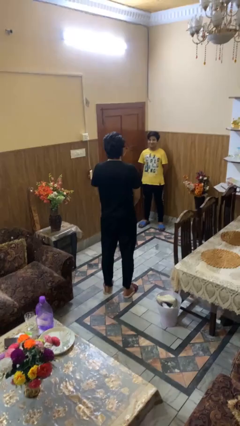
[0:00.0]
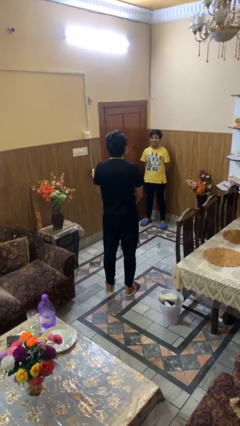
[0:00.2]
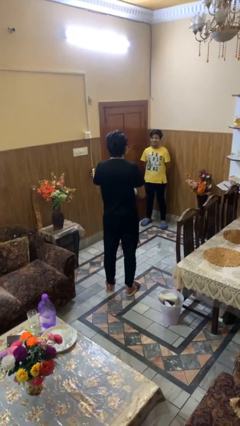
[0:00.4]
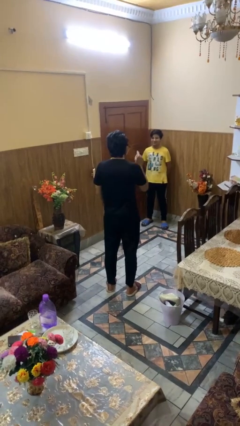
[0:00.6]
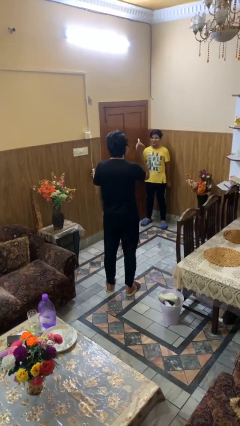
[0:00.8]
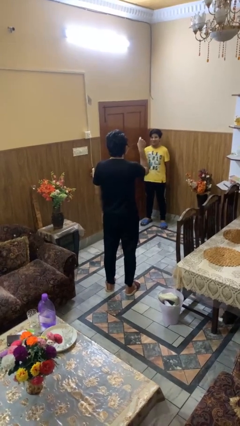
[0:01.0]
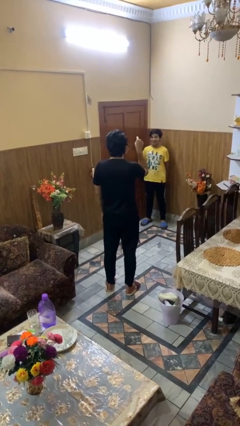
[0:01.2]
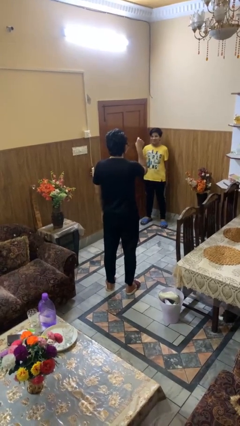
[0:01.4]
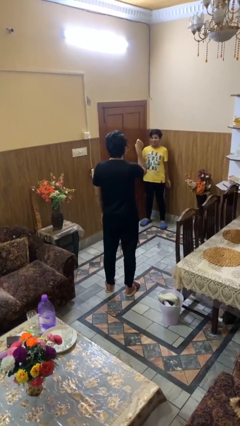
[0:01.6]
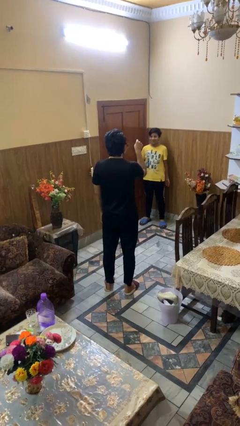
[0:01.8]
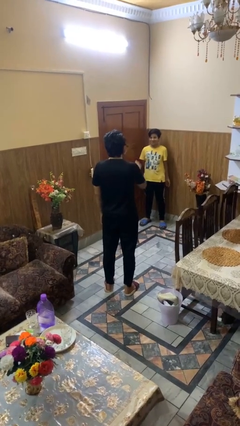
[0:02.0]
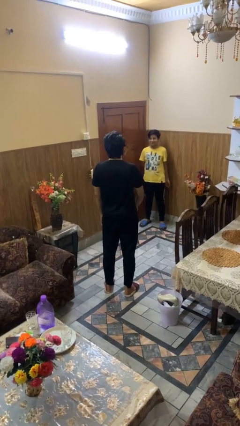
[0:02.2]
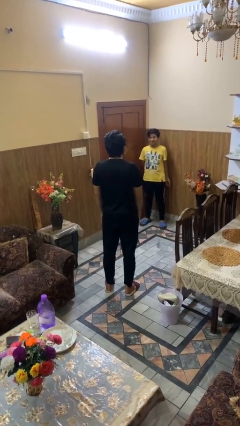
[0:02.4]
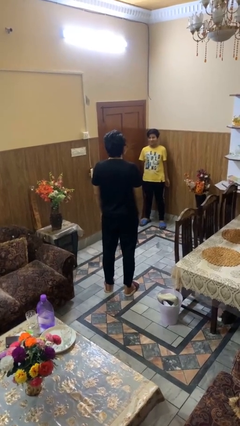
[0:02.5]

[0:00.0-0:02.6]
person points at person

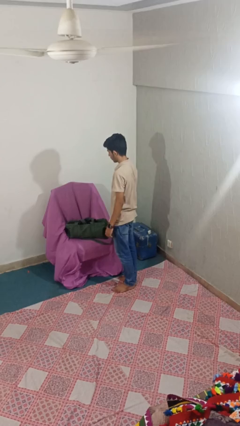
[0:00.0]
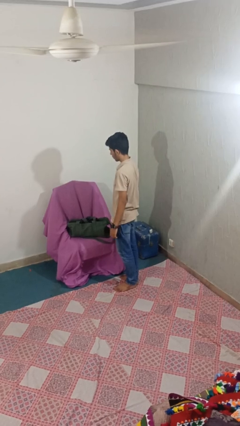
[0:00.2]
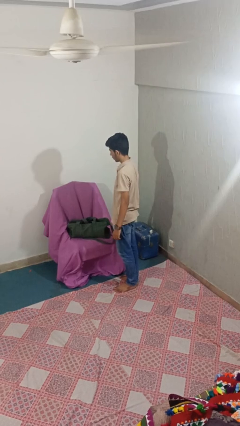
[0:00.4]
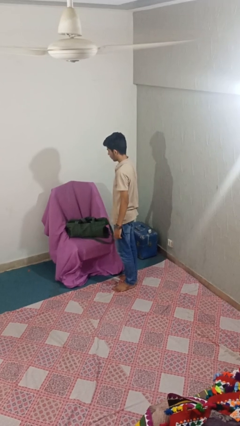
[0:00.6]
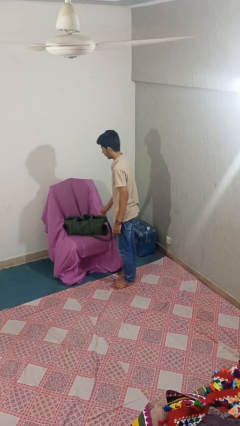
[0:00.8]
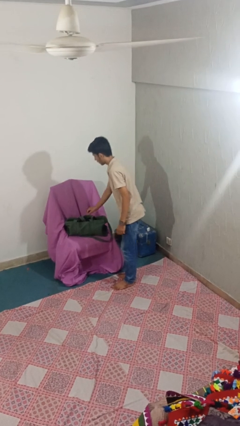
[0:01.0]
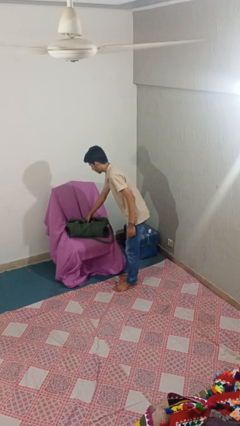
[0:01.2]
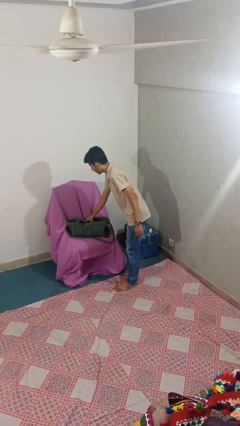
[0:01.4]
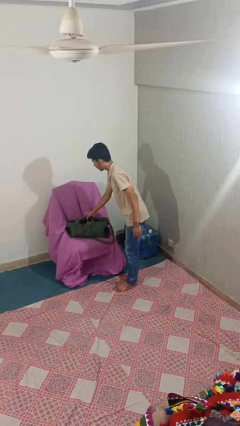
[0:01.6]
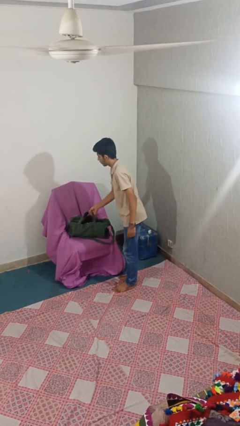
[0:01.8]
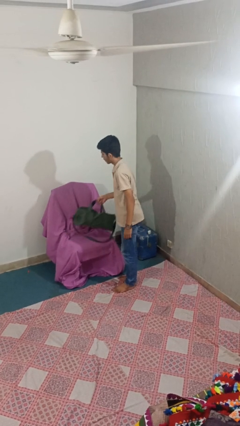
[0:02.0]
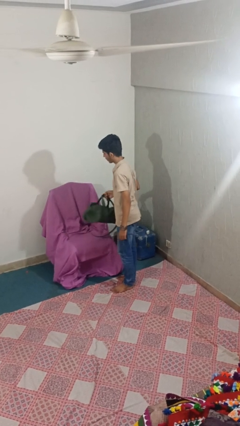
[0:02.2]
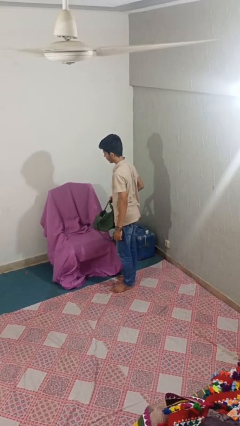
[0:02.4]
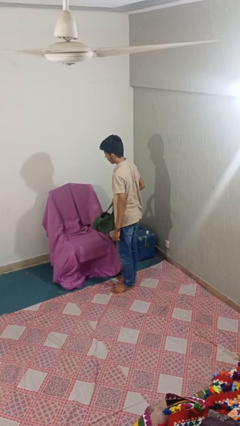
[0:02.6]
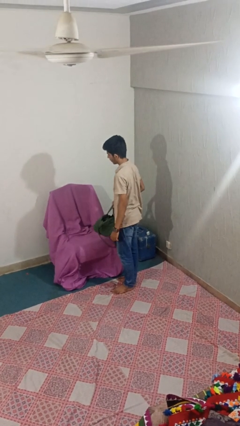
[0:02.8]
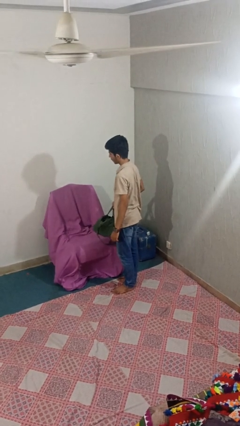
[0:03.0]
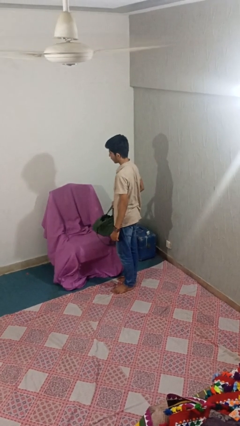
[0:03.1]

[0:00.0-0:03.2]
person picks up object from couch

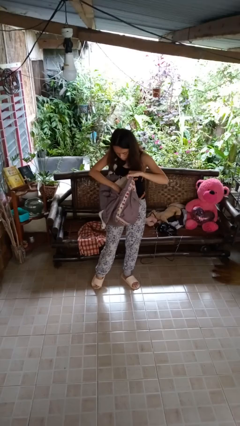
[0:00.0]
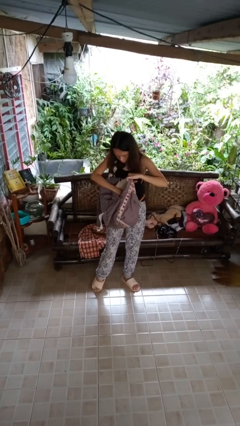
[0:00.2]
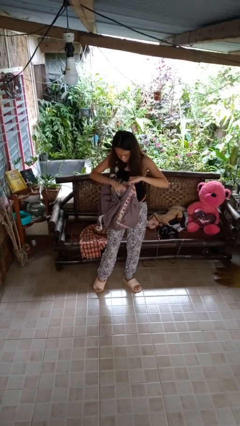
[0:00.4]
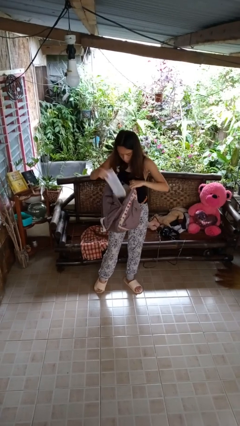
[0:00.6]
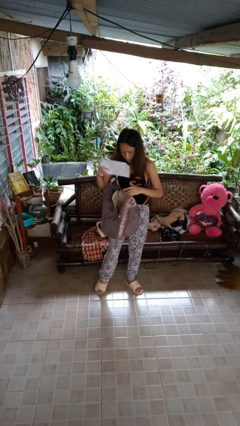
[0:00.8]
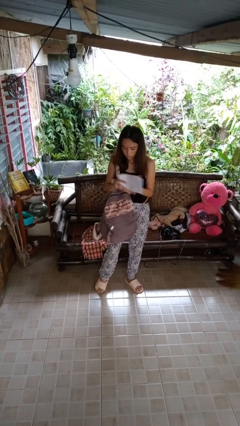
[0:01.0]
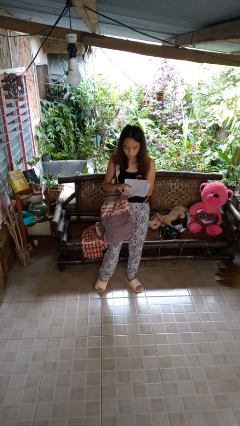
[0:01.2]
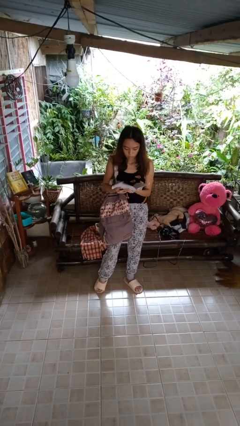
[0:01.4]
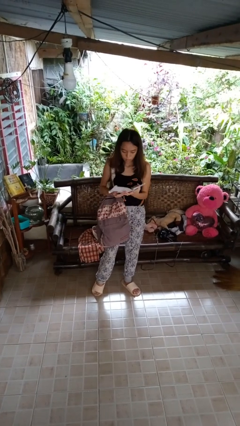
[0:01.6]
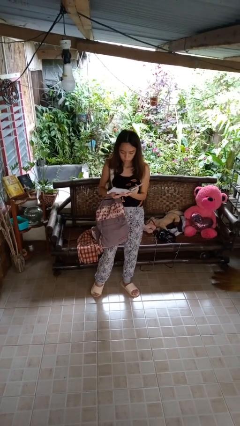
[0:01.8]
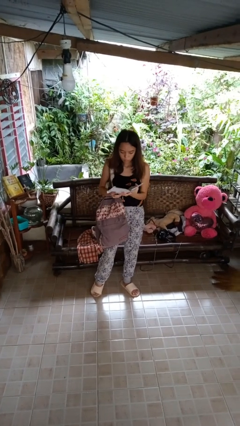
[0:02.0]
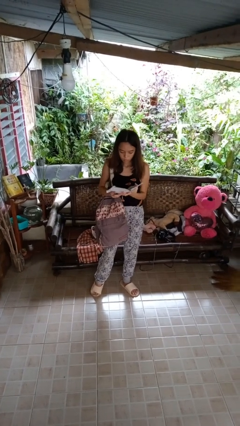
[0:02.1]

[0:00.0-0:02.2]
person takes object from backpack

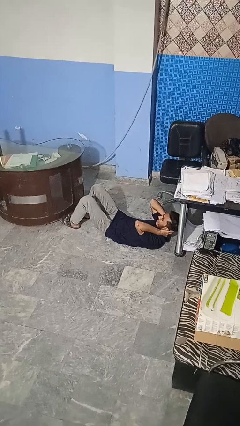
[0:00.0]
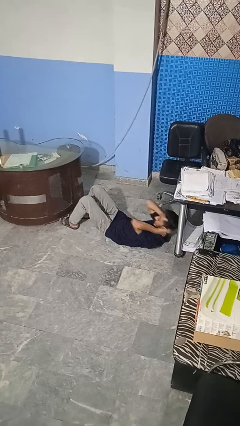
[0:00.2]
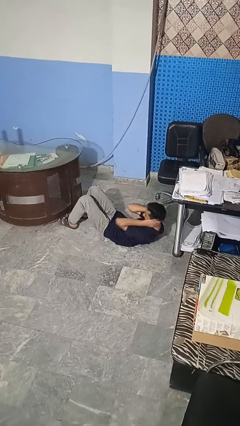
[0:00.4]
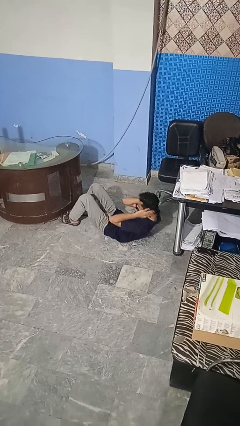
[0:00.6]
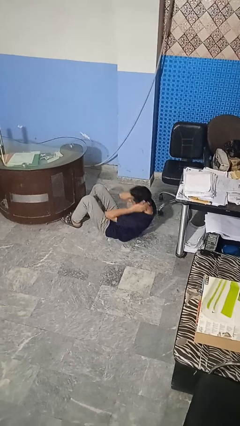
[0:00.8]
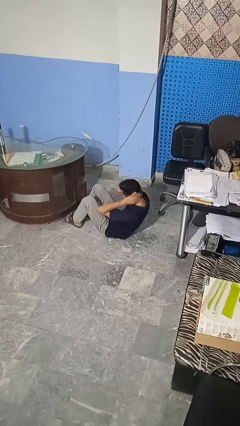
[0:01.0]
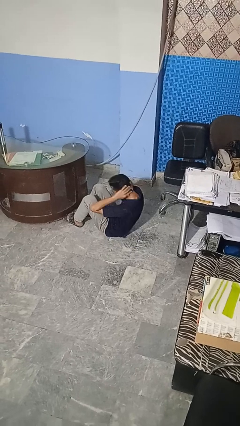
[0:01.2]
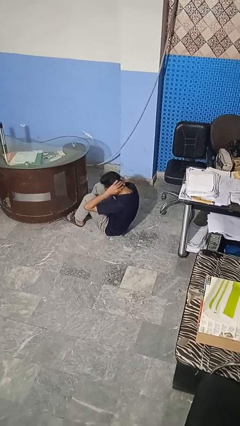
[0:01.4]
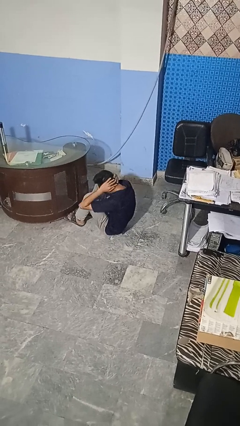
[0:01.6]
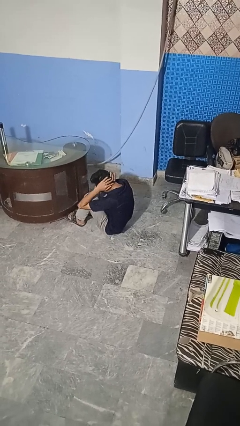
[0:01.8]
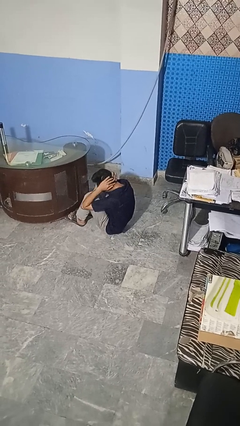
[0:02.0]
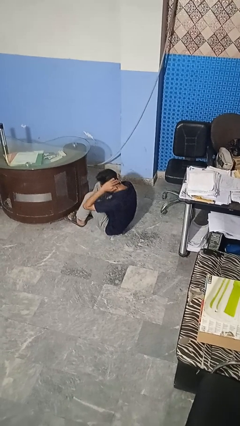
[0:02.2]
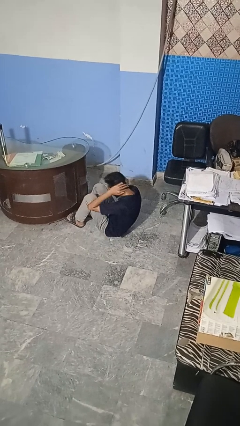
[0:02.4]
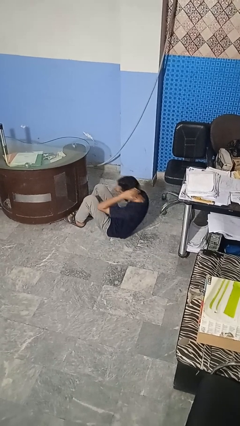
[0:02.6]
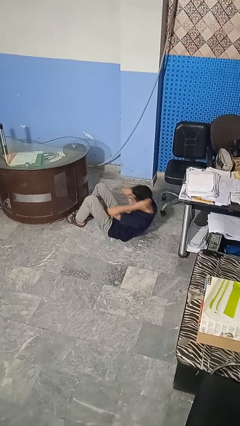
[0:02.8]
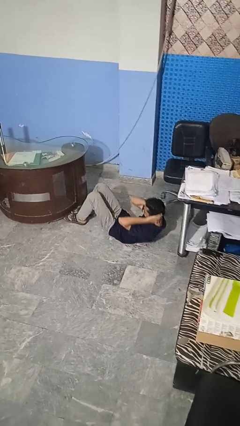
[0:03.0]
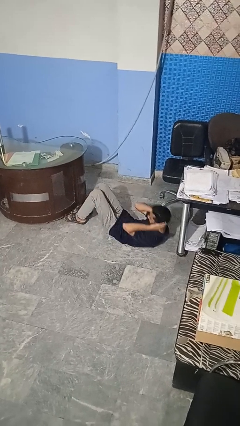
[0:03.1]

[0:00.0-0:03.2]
person exercises with situp

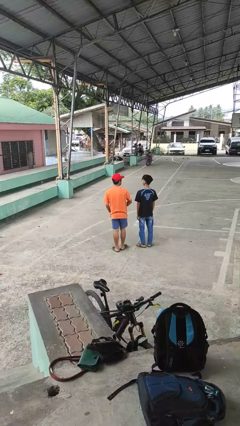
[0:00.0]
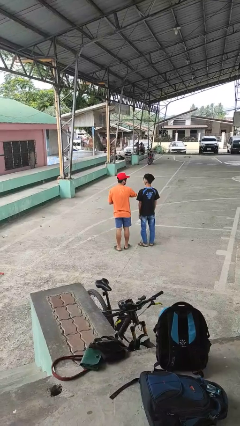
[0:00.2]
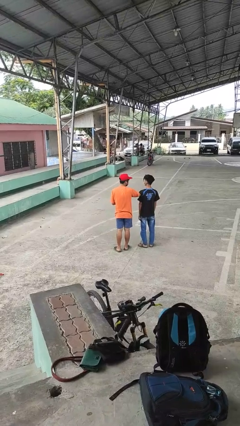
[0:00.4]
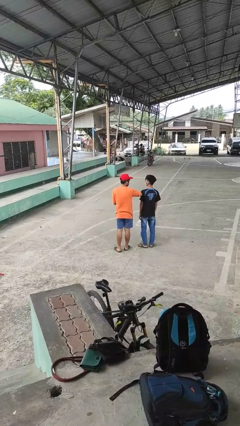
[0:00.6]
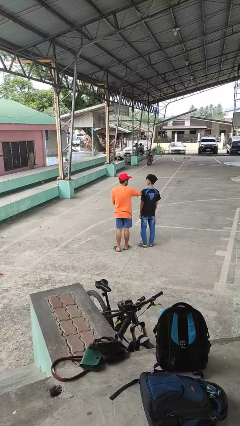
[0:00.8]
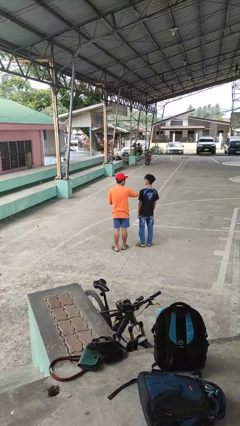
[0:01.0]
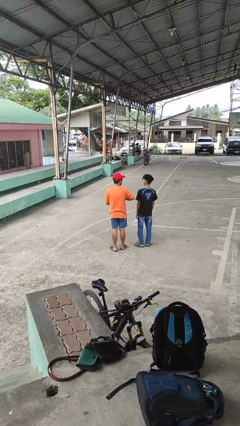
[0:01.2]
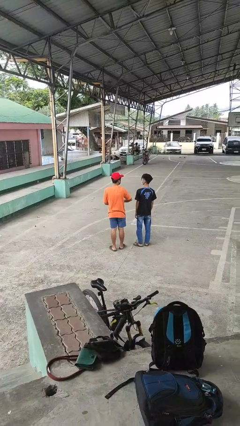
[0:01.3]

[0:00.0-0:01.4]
person nudges person with elbow

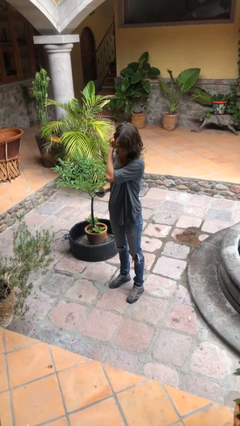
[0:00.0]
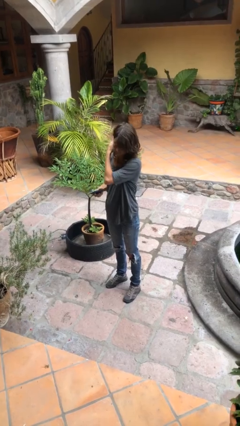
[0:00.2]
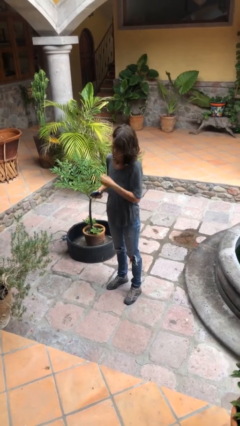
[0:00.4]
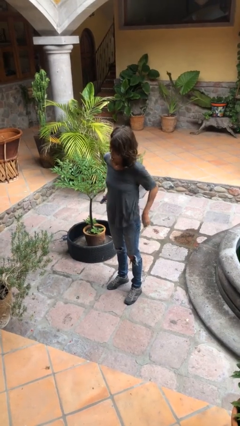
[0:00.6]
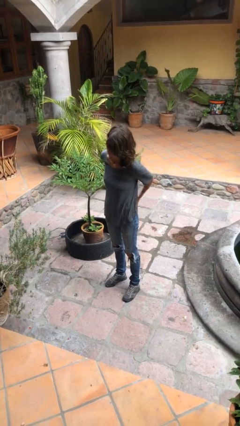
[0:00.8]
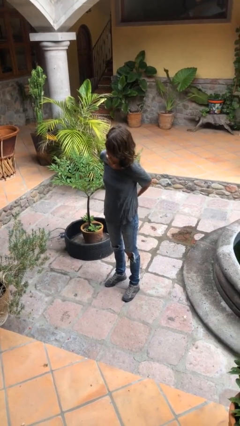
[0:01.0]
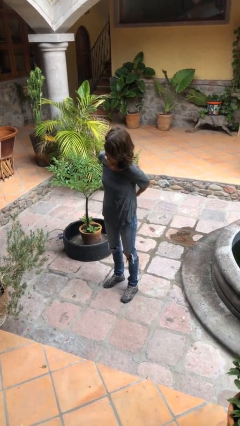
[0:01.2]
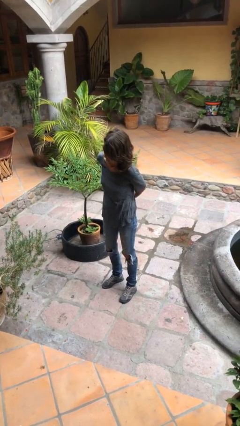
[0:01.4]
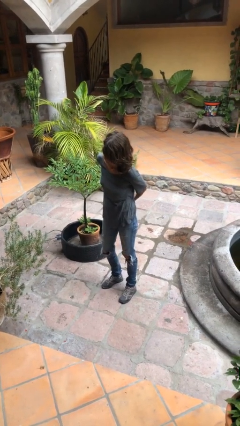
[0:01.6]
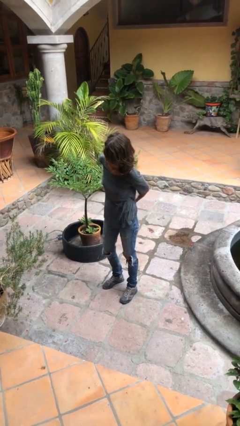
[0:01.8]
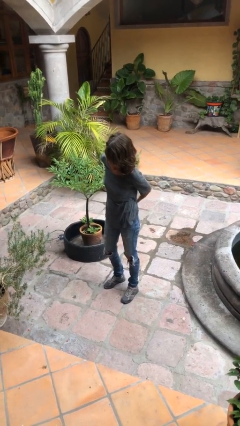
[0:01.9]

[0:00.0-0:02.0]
person puts phone into pocket

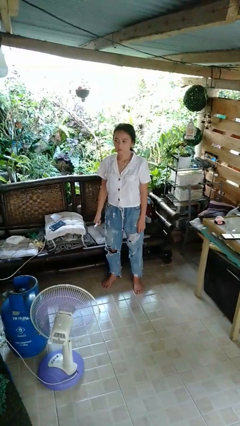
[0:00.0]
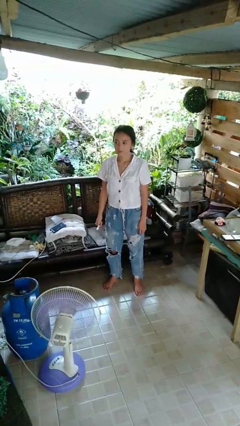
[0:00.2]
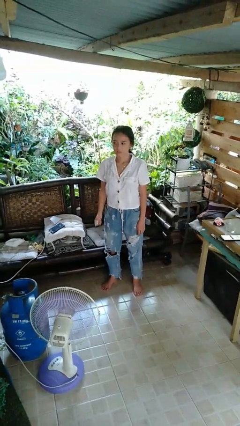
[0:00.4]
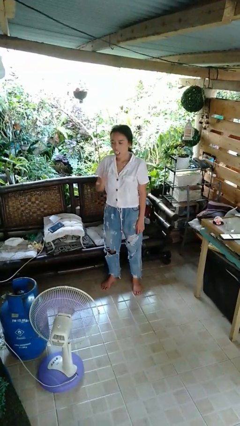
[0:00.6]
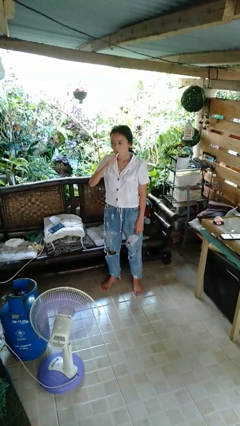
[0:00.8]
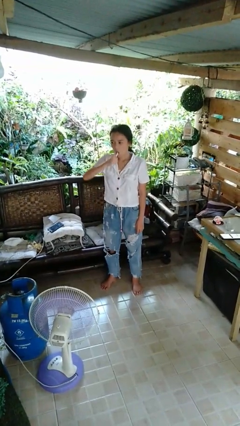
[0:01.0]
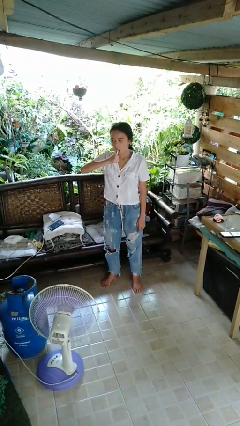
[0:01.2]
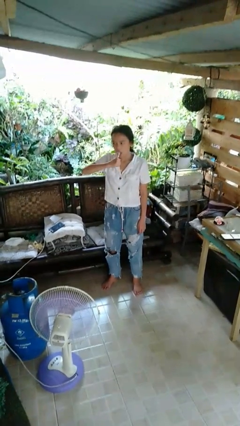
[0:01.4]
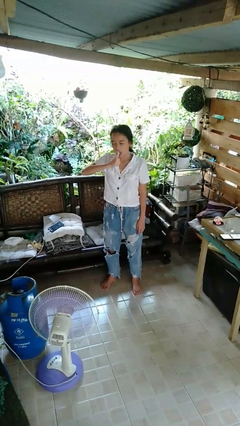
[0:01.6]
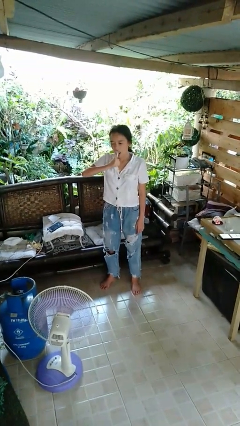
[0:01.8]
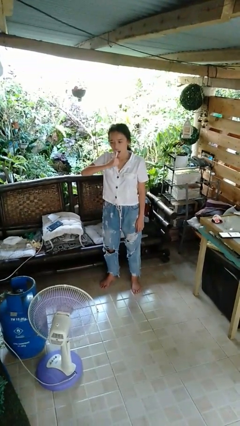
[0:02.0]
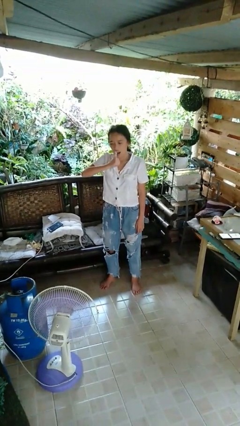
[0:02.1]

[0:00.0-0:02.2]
person brushes teeth
